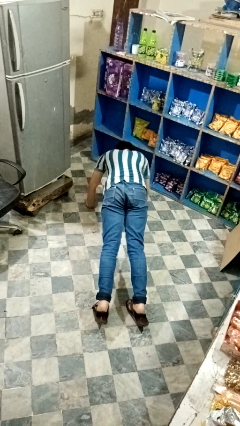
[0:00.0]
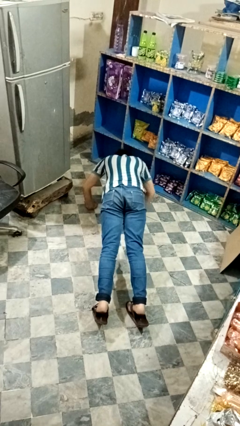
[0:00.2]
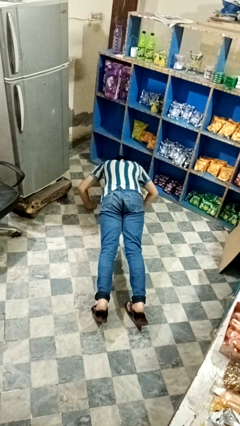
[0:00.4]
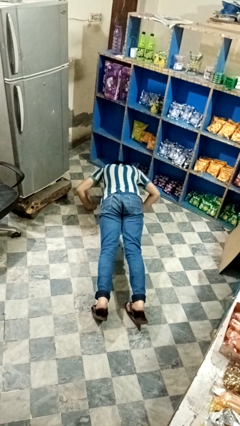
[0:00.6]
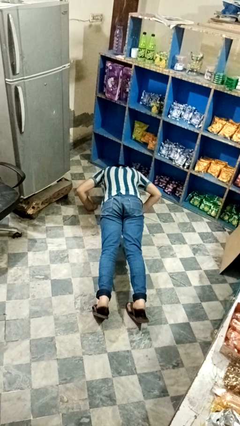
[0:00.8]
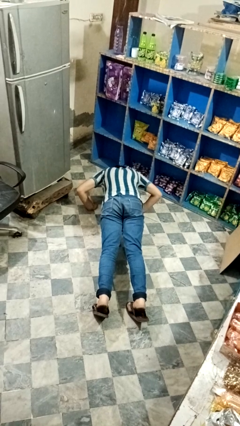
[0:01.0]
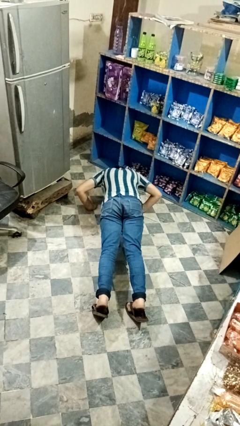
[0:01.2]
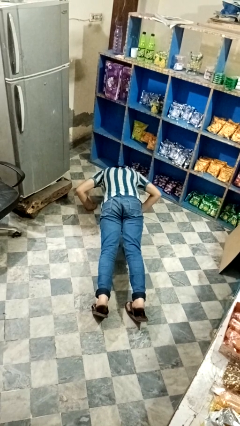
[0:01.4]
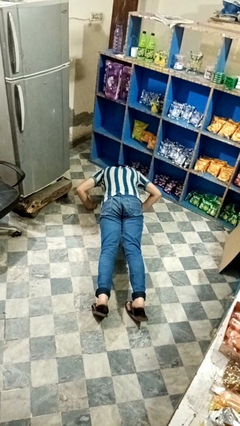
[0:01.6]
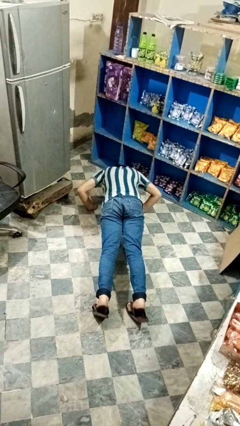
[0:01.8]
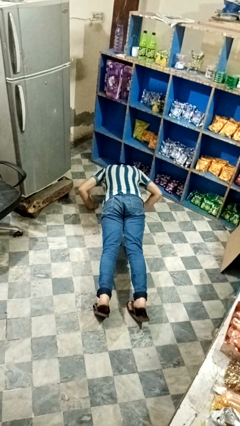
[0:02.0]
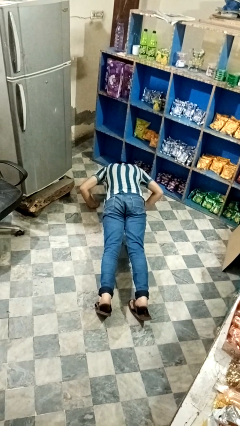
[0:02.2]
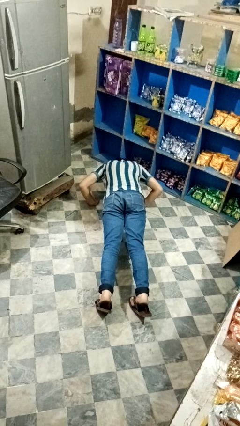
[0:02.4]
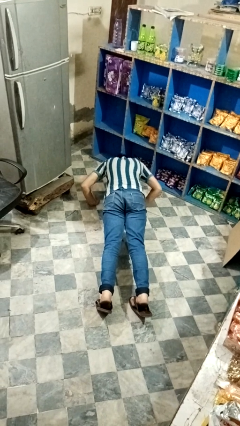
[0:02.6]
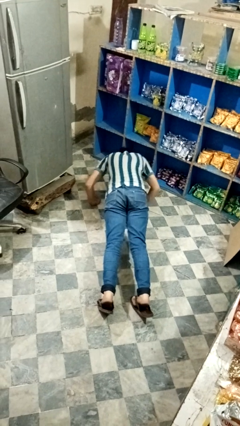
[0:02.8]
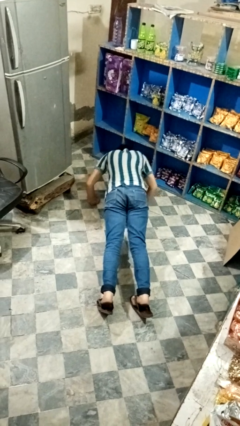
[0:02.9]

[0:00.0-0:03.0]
person exercises with pushup

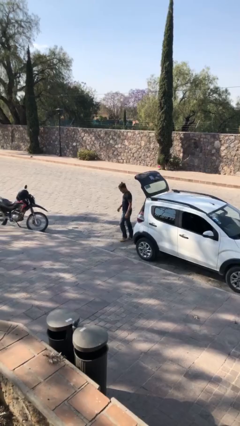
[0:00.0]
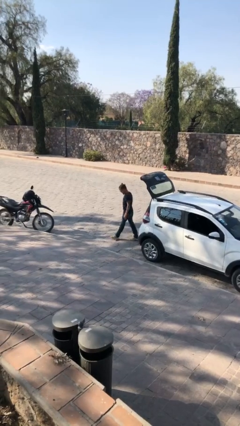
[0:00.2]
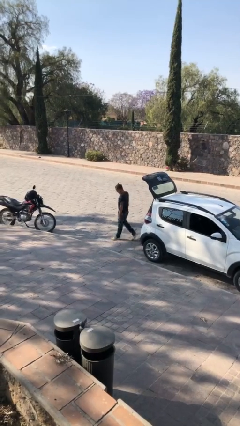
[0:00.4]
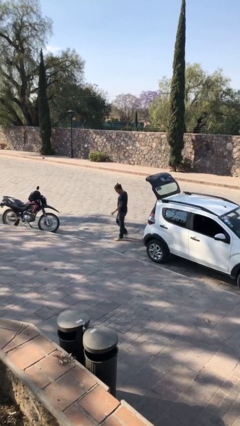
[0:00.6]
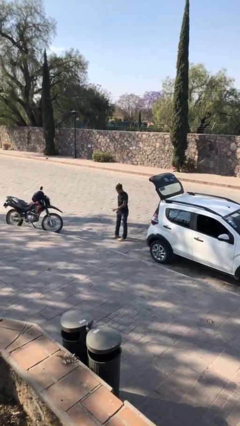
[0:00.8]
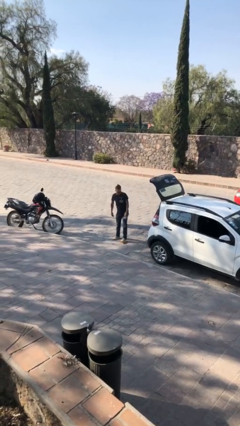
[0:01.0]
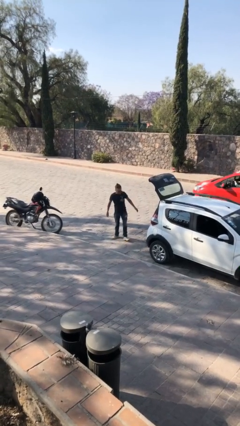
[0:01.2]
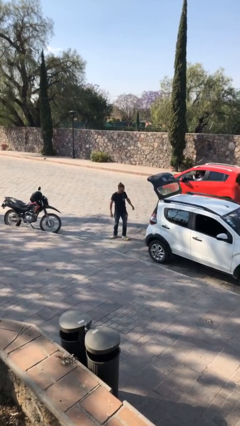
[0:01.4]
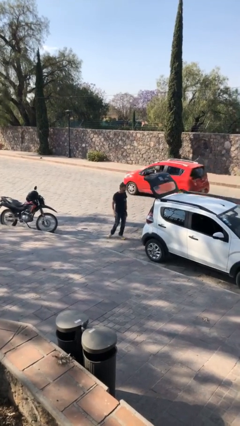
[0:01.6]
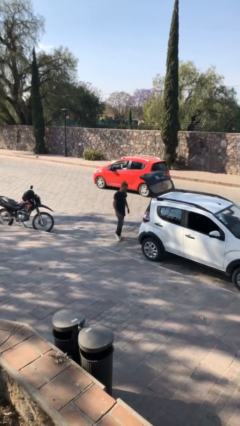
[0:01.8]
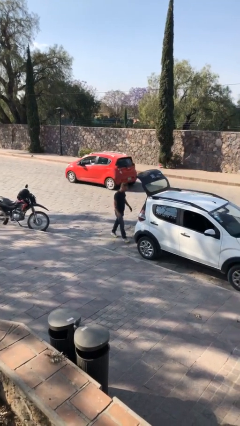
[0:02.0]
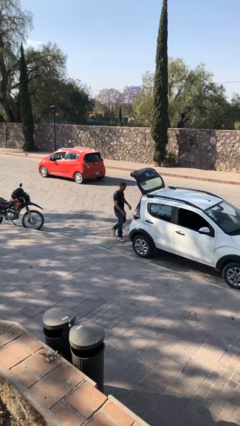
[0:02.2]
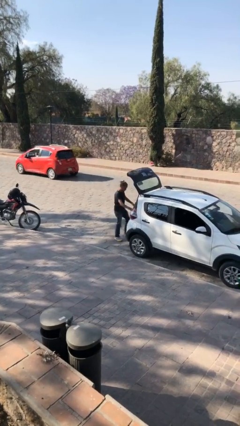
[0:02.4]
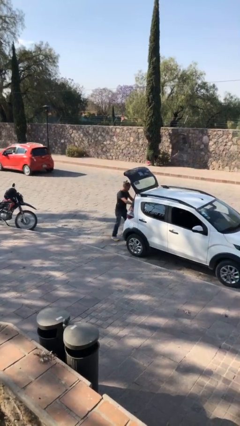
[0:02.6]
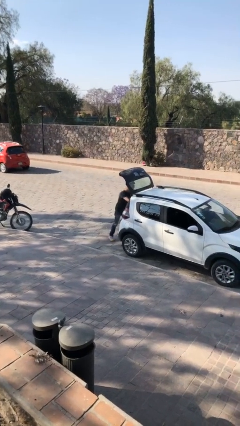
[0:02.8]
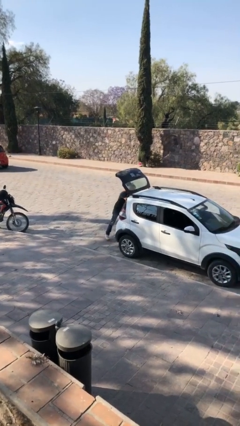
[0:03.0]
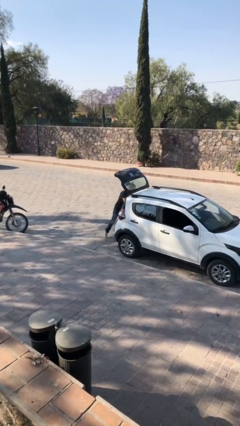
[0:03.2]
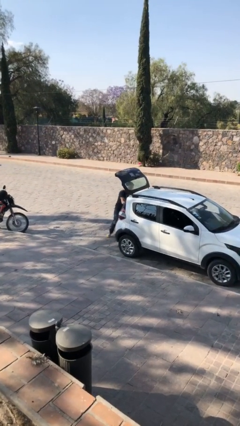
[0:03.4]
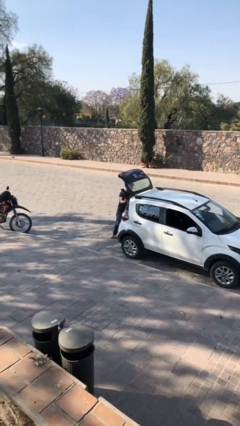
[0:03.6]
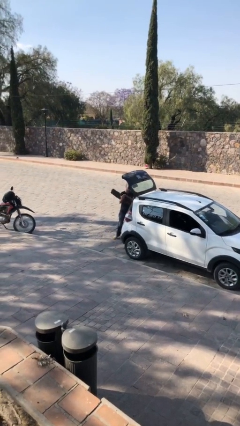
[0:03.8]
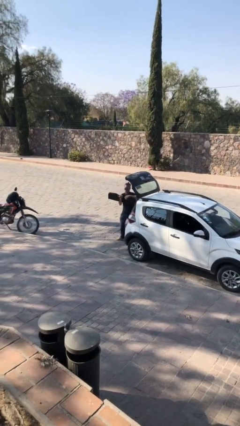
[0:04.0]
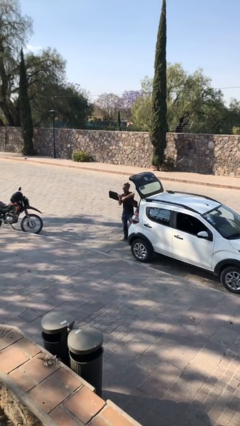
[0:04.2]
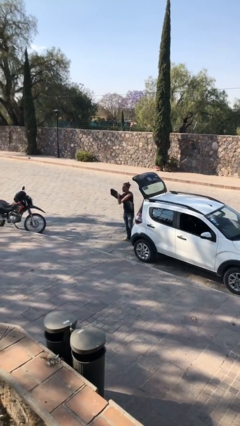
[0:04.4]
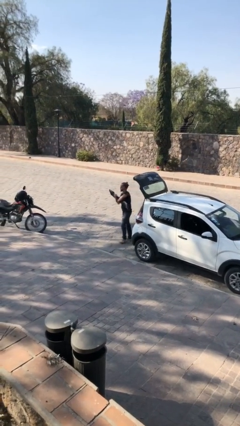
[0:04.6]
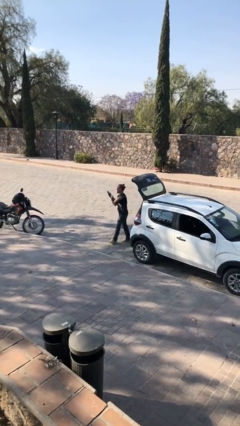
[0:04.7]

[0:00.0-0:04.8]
person unloads car

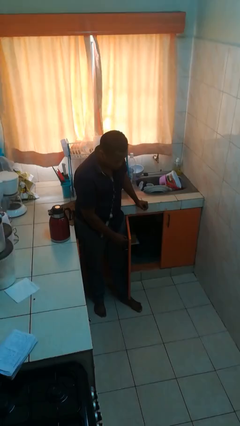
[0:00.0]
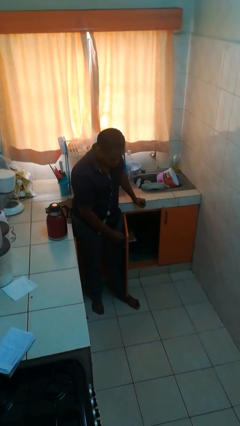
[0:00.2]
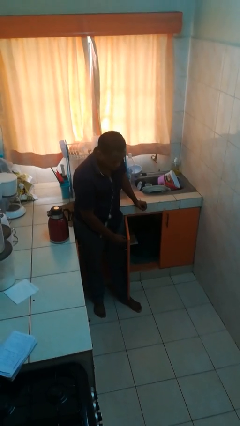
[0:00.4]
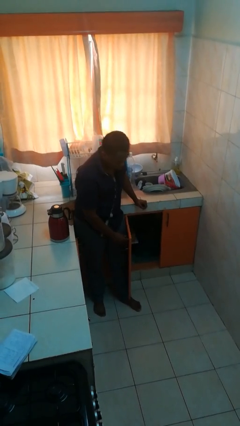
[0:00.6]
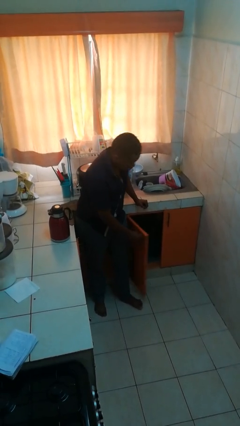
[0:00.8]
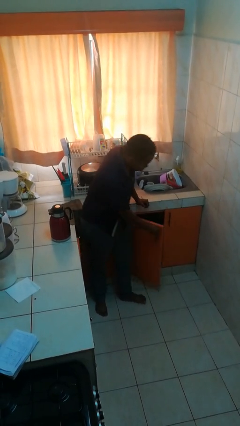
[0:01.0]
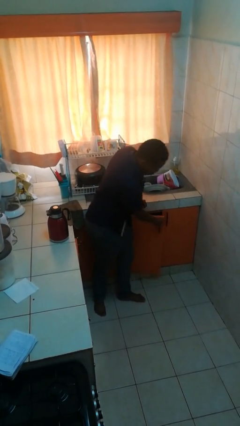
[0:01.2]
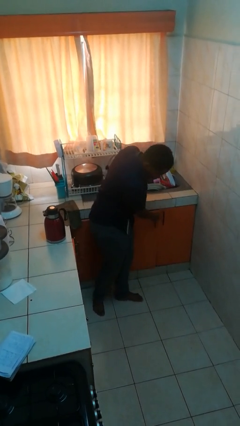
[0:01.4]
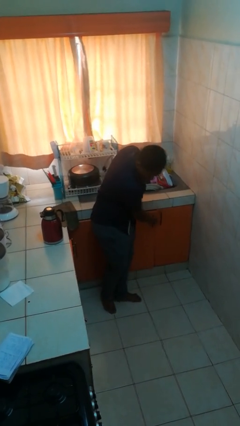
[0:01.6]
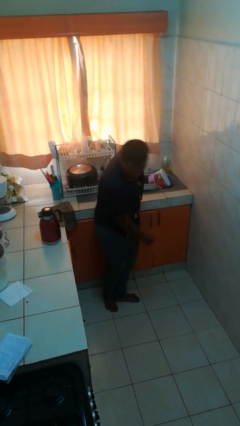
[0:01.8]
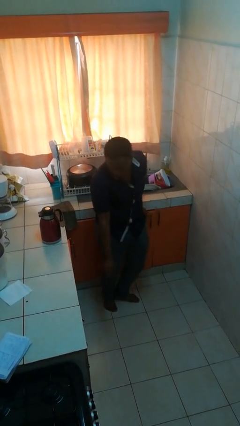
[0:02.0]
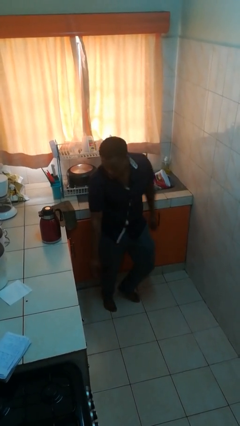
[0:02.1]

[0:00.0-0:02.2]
person closes cabinet

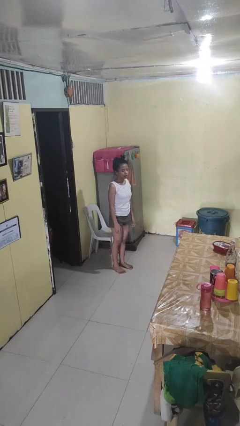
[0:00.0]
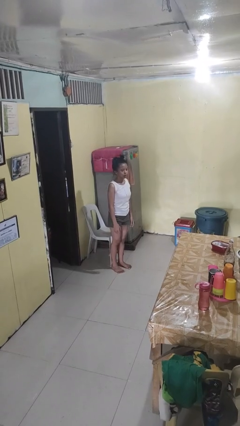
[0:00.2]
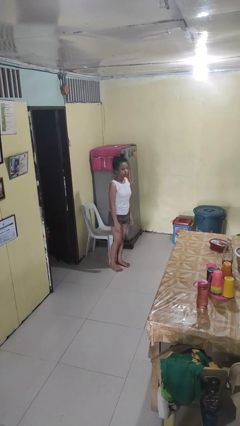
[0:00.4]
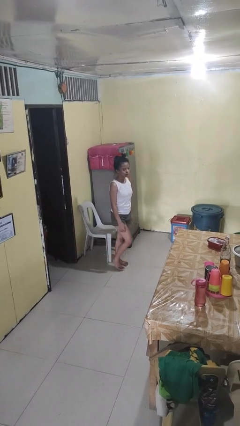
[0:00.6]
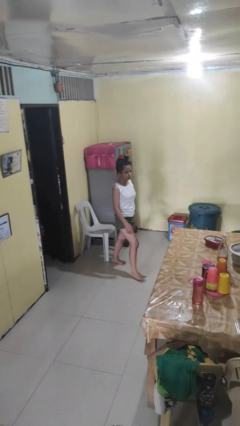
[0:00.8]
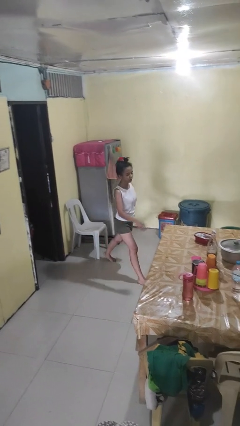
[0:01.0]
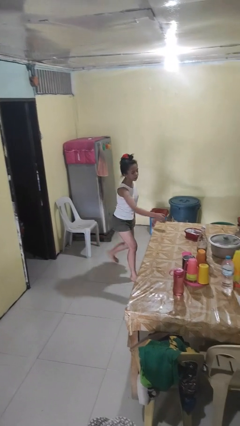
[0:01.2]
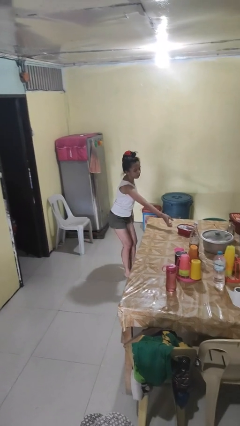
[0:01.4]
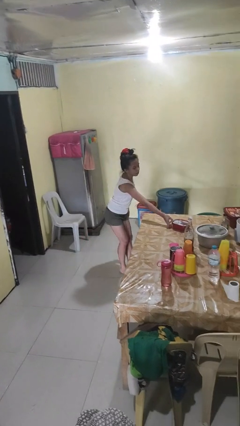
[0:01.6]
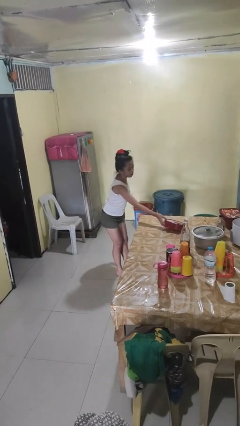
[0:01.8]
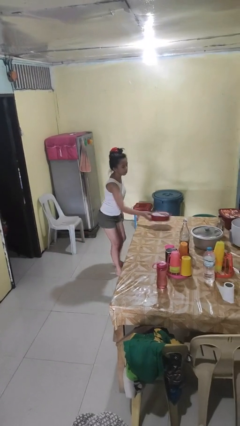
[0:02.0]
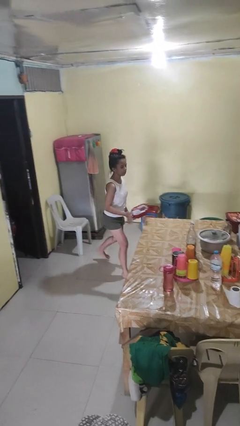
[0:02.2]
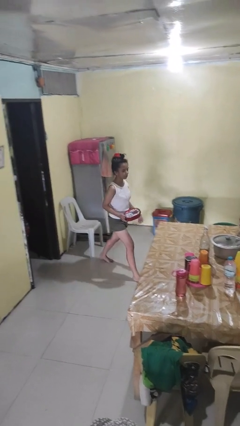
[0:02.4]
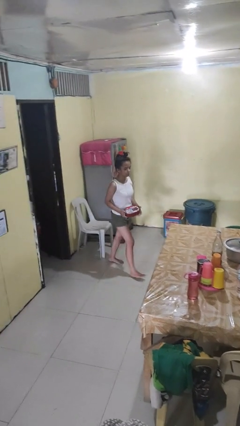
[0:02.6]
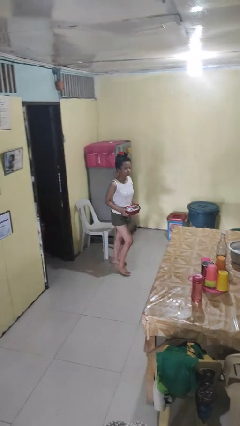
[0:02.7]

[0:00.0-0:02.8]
person picks up object from table

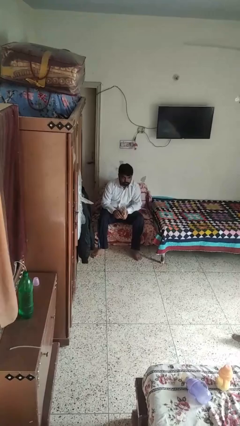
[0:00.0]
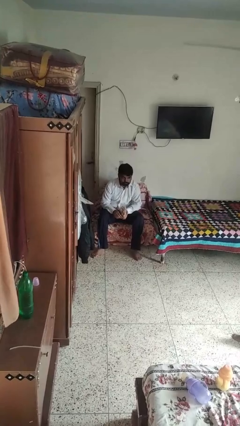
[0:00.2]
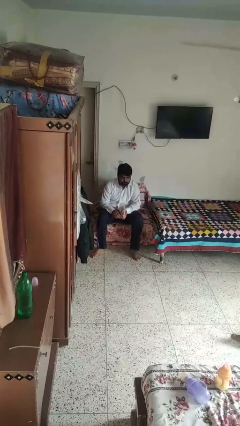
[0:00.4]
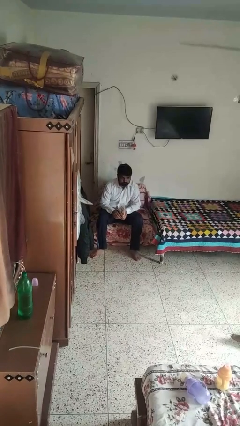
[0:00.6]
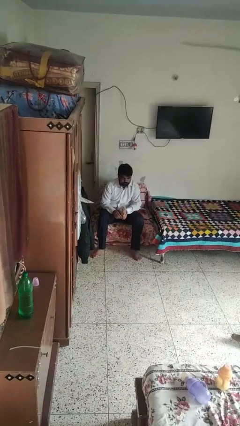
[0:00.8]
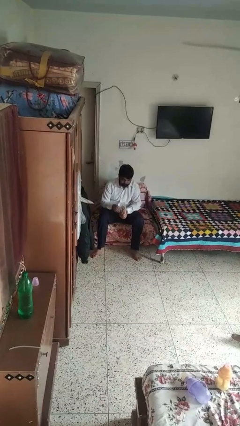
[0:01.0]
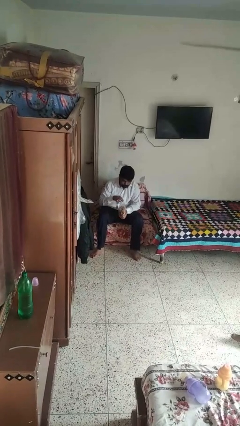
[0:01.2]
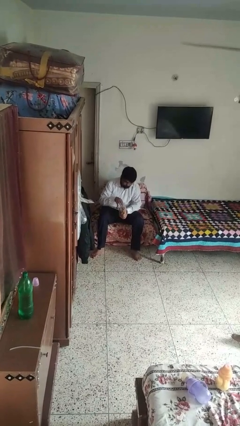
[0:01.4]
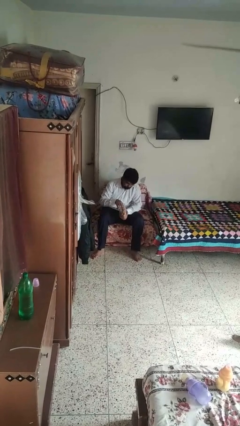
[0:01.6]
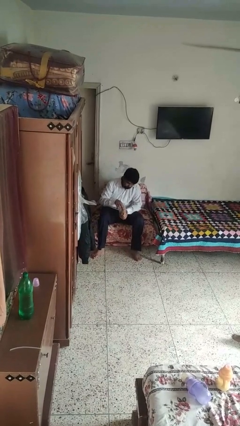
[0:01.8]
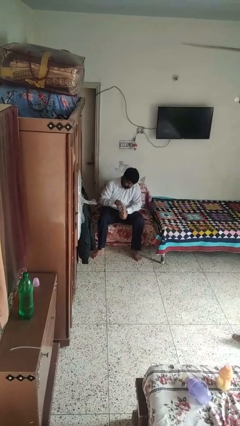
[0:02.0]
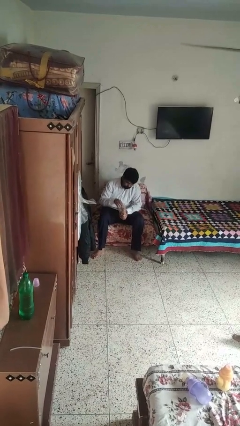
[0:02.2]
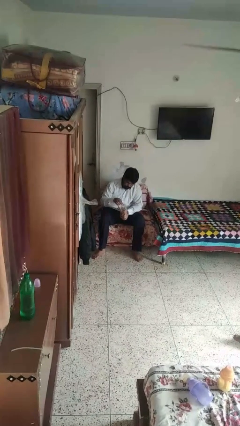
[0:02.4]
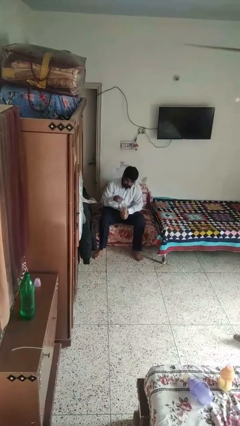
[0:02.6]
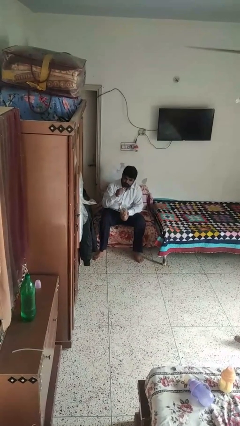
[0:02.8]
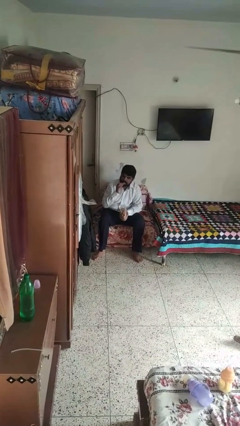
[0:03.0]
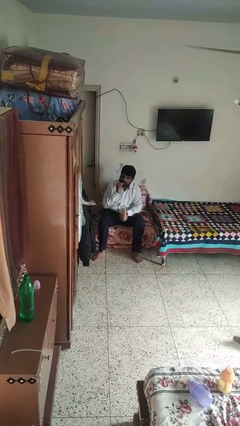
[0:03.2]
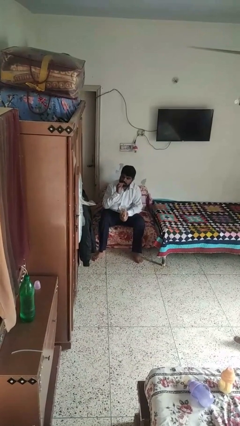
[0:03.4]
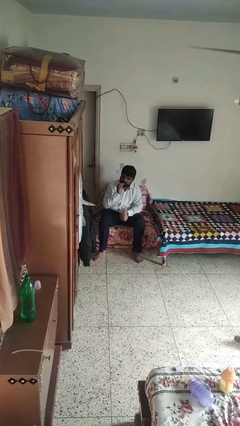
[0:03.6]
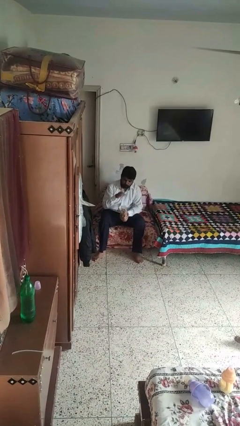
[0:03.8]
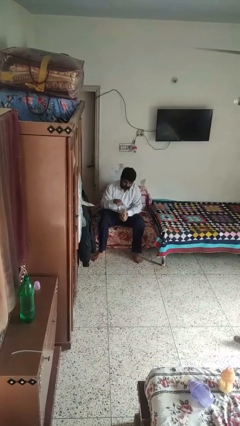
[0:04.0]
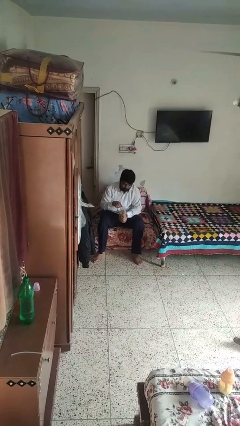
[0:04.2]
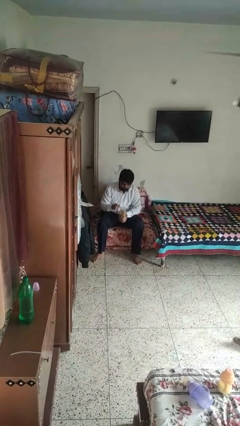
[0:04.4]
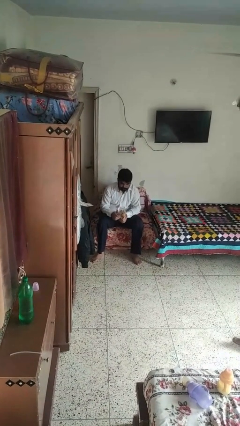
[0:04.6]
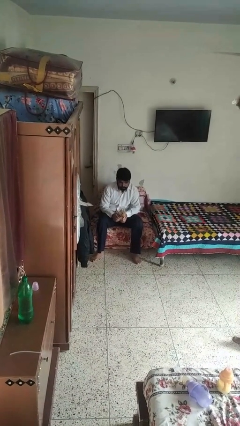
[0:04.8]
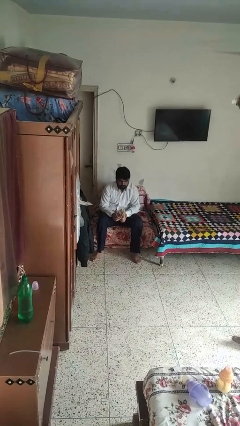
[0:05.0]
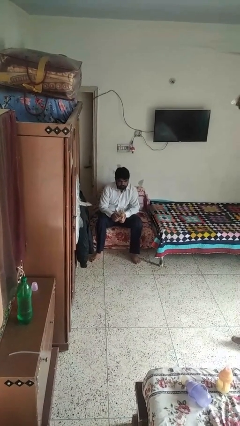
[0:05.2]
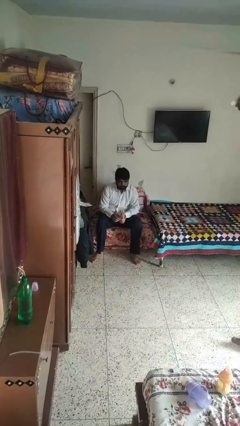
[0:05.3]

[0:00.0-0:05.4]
person eats snack from bag
